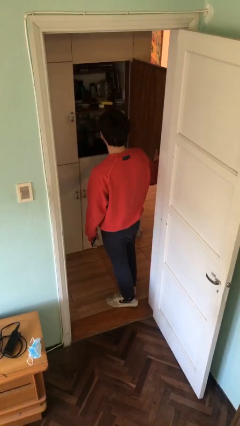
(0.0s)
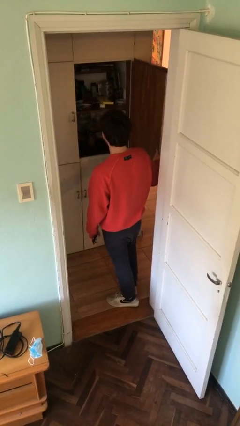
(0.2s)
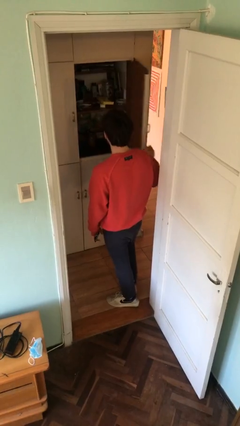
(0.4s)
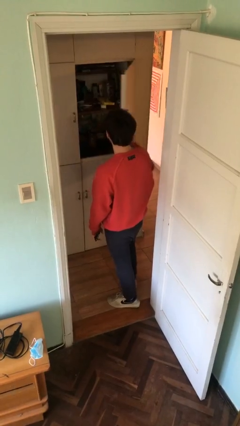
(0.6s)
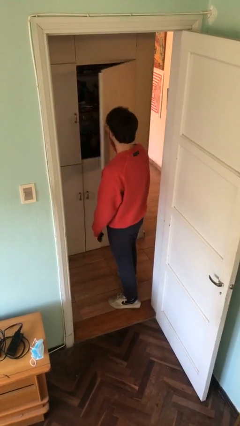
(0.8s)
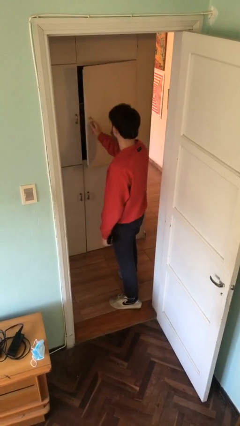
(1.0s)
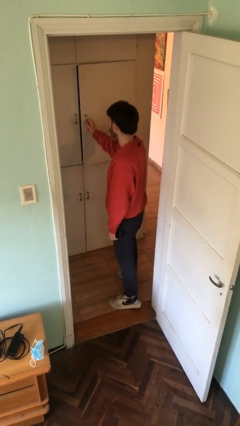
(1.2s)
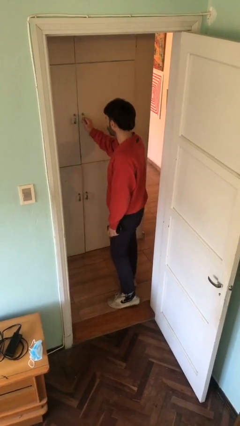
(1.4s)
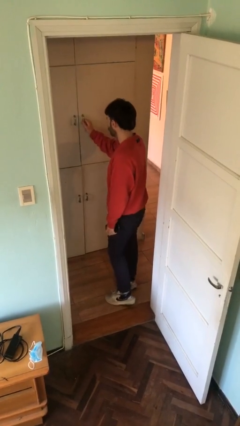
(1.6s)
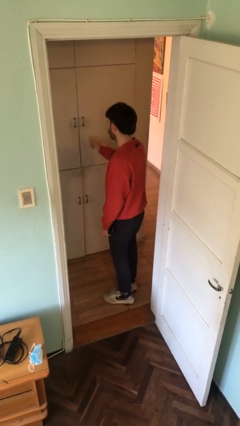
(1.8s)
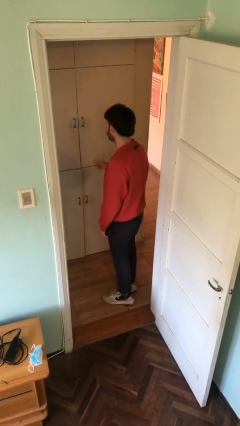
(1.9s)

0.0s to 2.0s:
person closes closet door

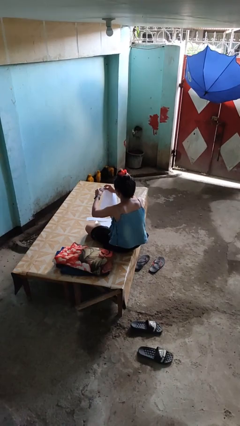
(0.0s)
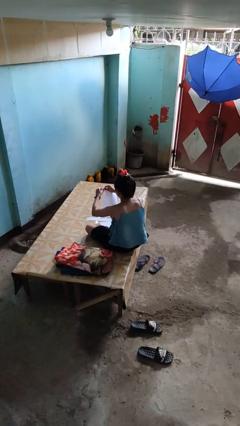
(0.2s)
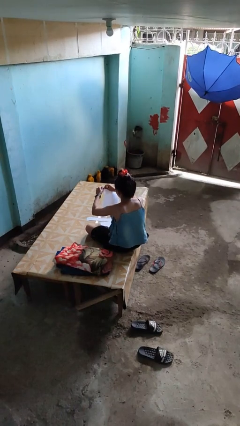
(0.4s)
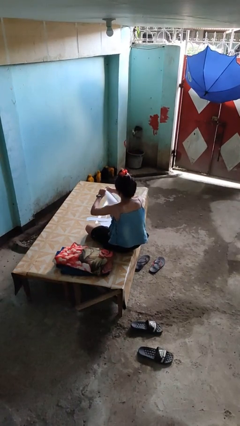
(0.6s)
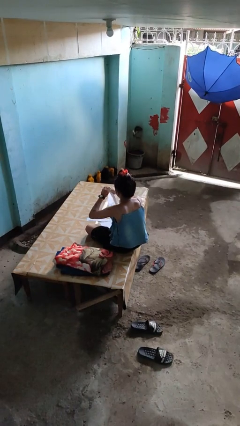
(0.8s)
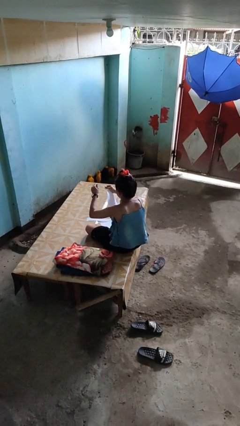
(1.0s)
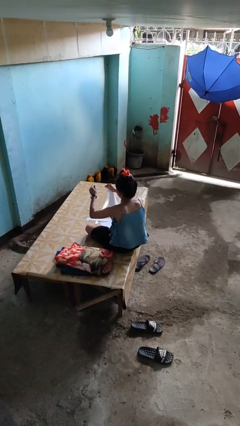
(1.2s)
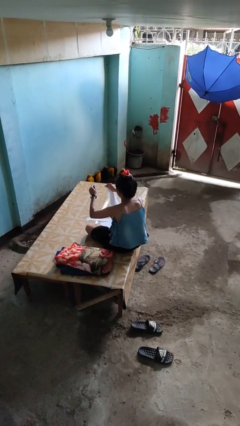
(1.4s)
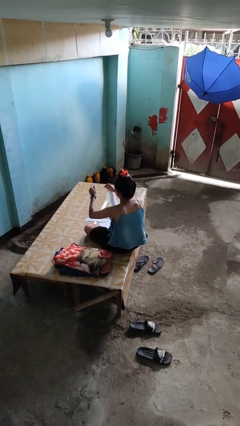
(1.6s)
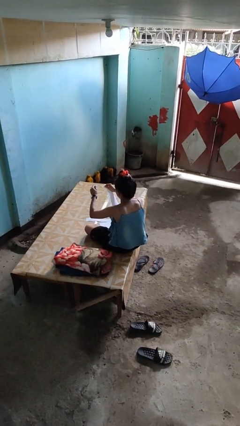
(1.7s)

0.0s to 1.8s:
person tears paper

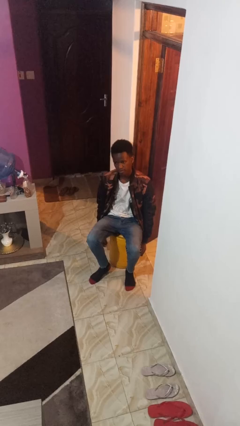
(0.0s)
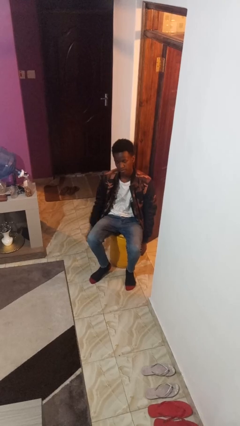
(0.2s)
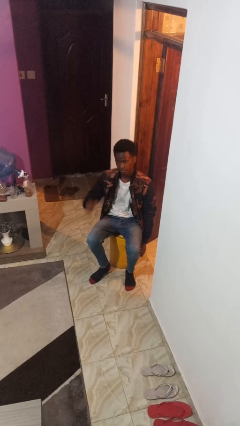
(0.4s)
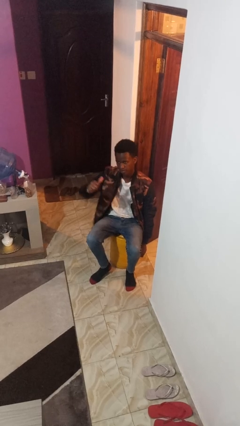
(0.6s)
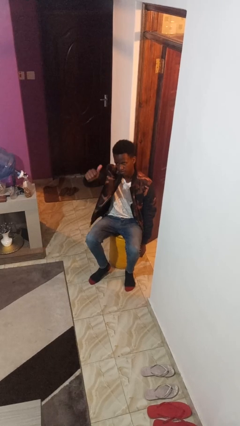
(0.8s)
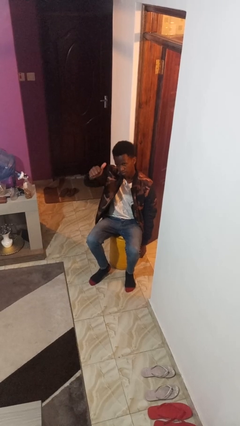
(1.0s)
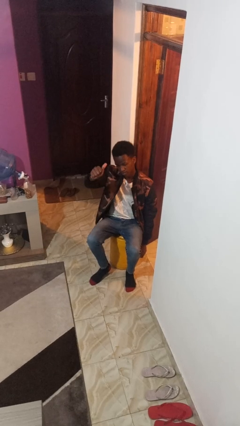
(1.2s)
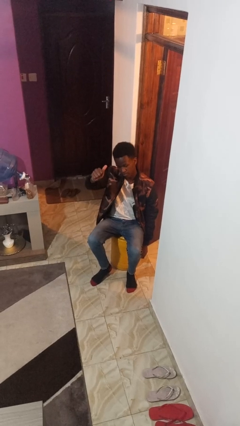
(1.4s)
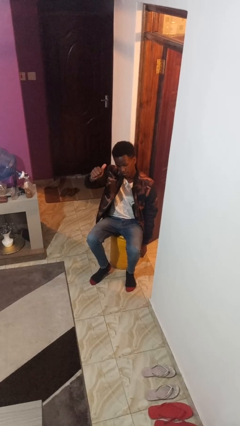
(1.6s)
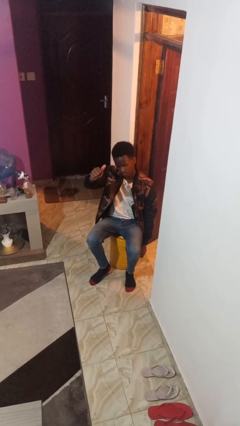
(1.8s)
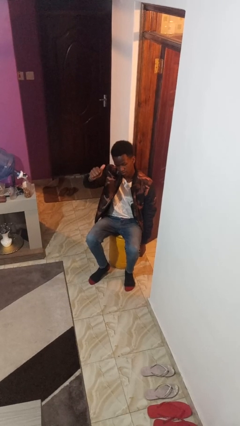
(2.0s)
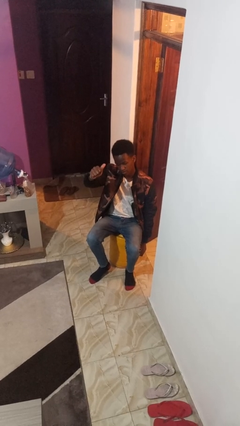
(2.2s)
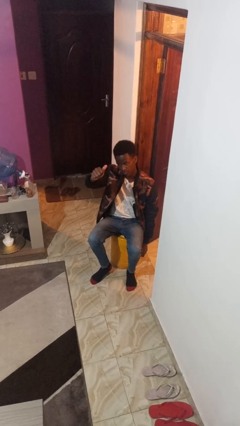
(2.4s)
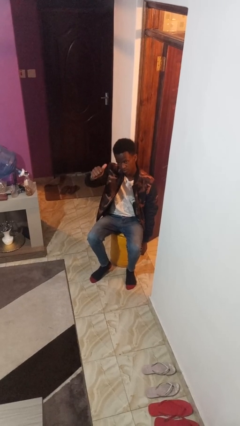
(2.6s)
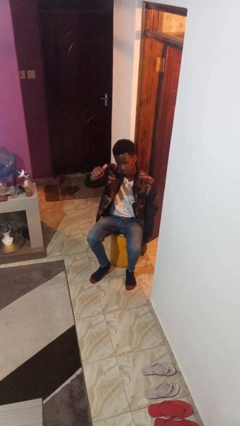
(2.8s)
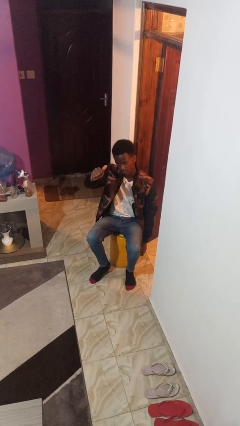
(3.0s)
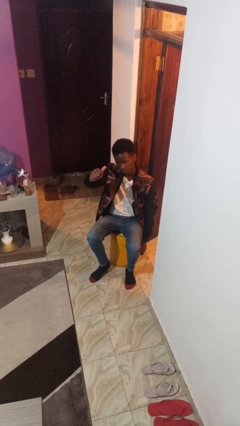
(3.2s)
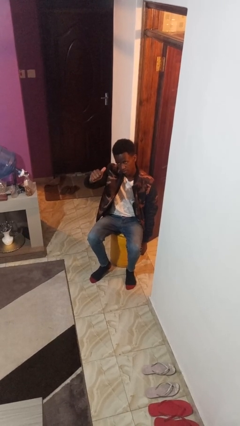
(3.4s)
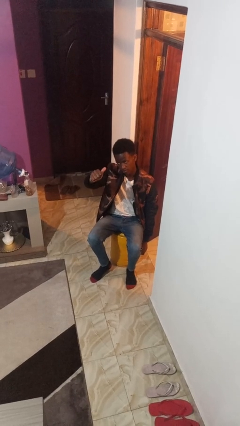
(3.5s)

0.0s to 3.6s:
person gestures thumbs up

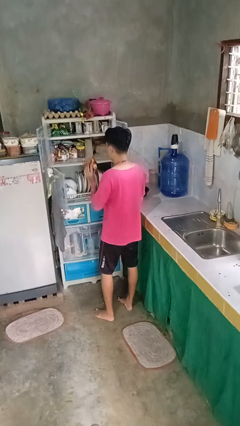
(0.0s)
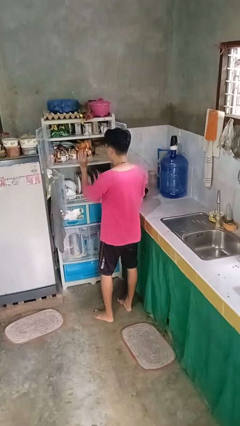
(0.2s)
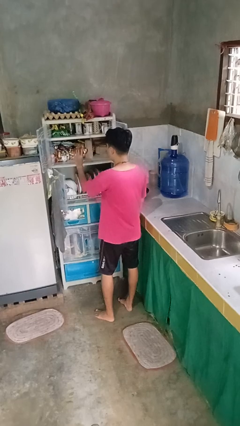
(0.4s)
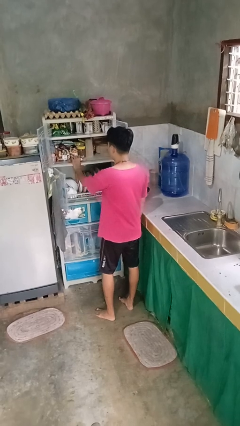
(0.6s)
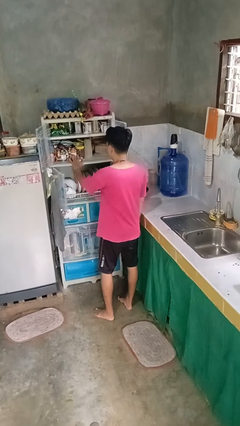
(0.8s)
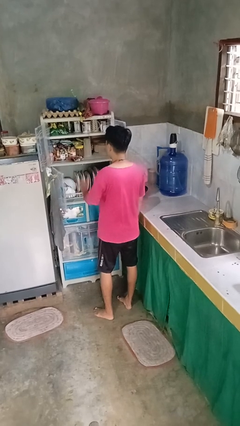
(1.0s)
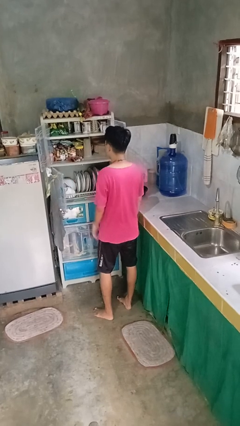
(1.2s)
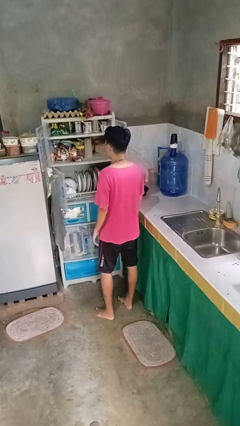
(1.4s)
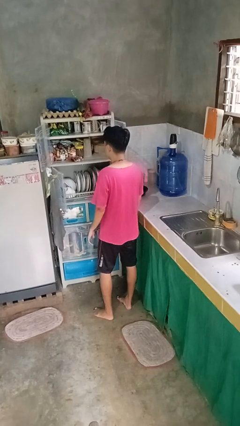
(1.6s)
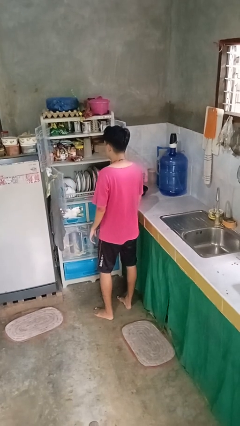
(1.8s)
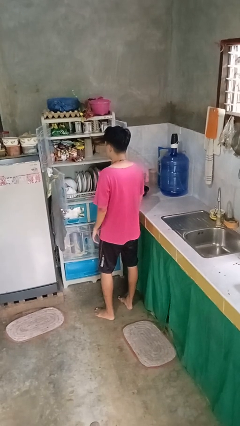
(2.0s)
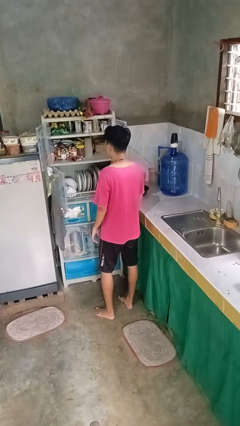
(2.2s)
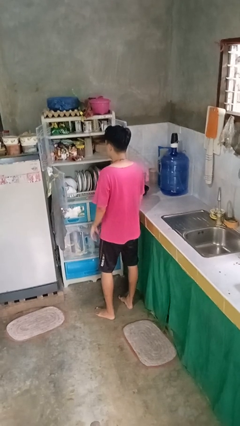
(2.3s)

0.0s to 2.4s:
person puts object in cabinet

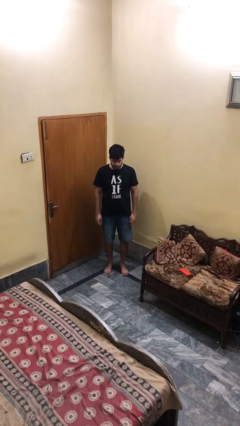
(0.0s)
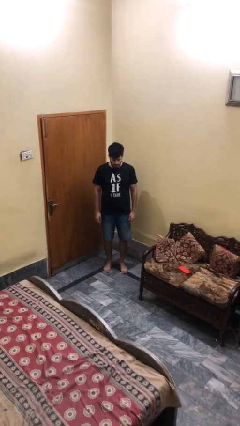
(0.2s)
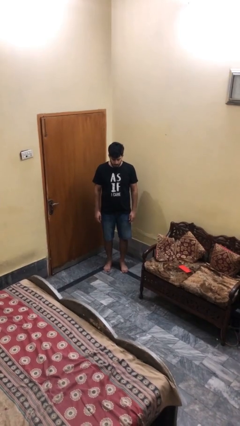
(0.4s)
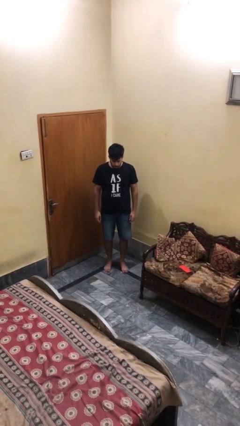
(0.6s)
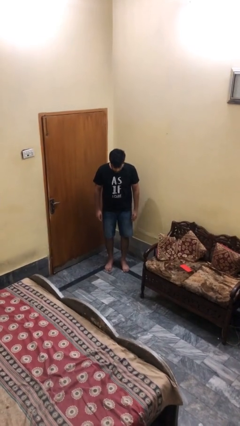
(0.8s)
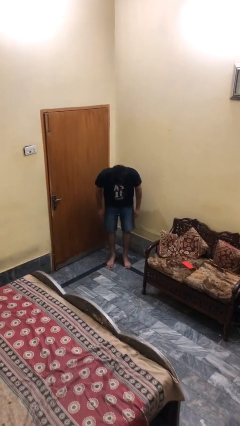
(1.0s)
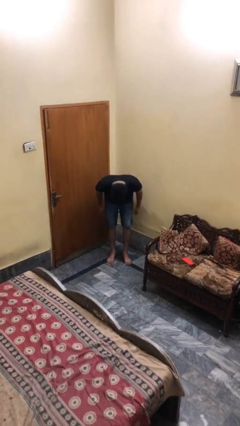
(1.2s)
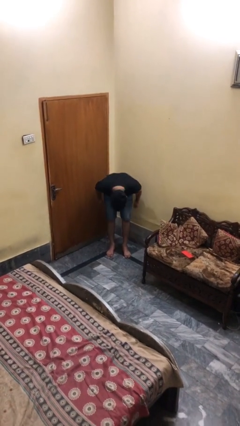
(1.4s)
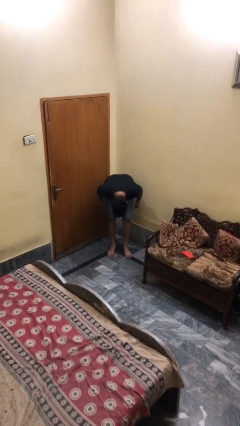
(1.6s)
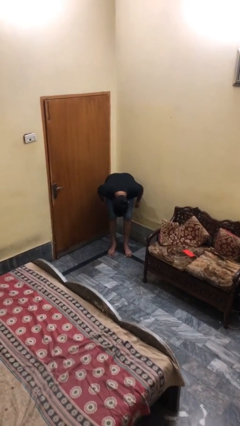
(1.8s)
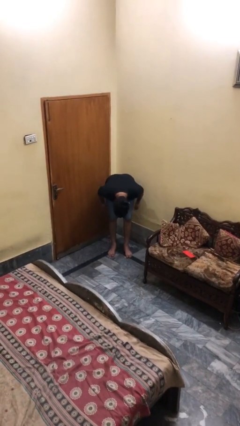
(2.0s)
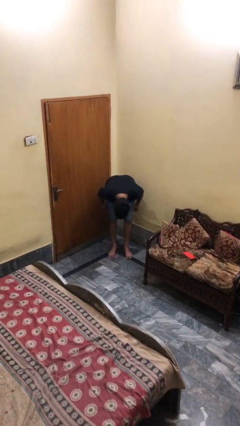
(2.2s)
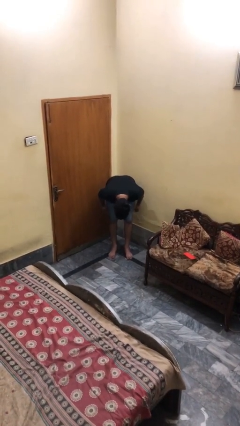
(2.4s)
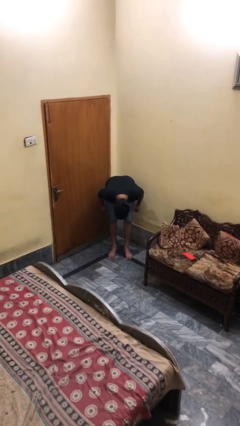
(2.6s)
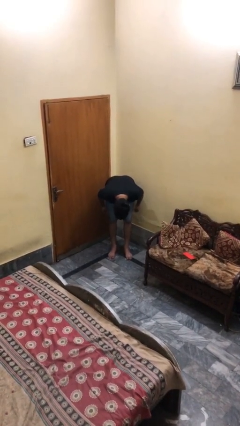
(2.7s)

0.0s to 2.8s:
person bows

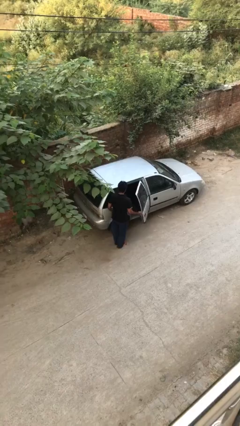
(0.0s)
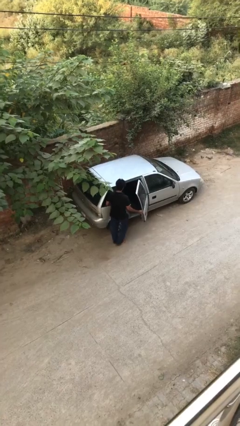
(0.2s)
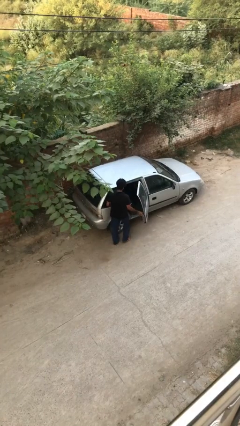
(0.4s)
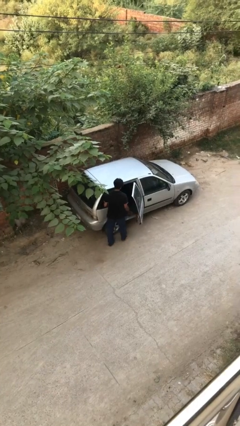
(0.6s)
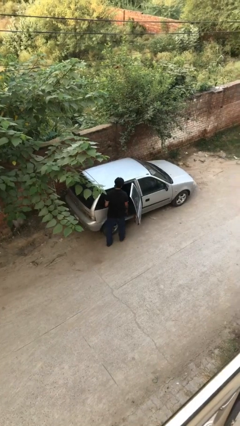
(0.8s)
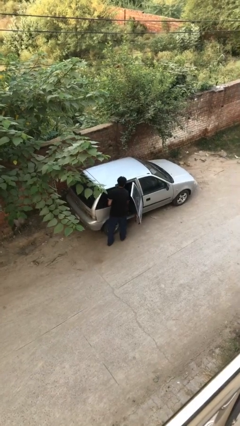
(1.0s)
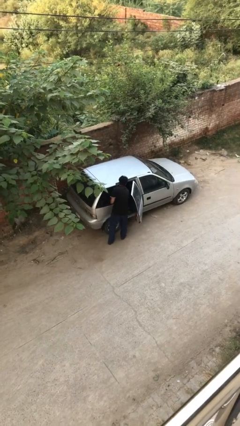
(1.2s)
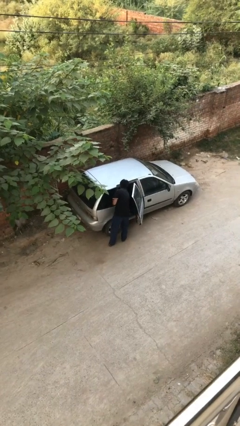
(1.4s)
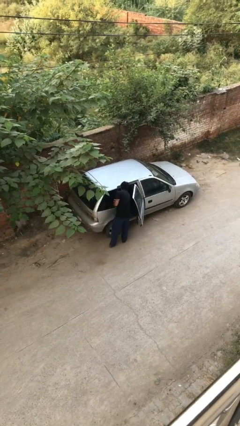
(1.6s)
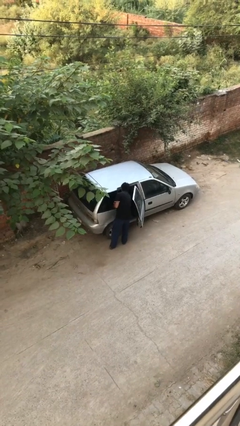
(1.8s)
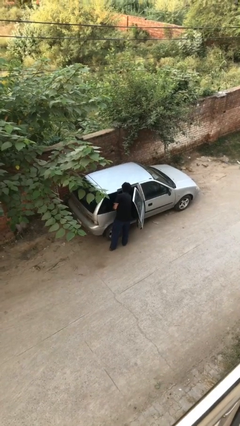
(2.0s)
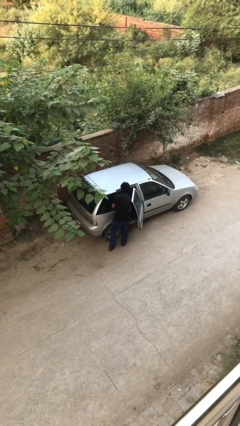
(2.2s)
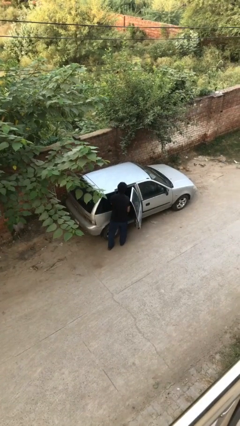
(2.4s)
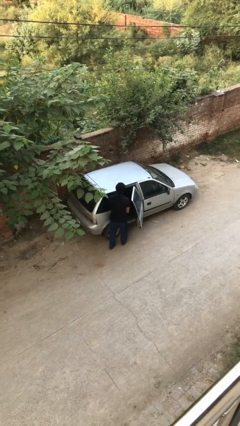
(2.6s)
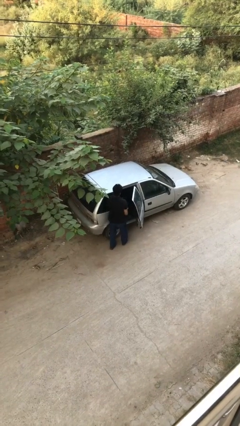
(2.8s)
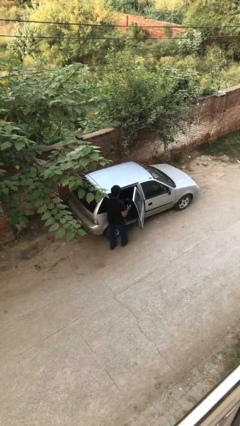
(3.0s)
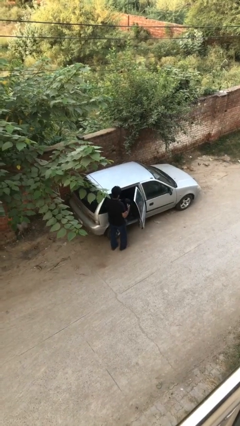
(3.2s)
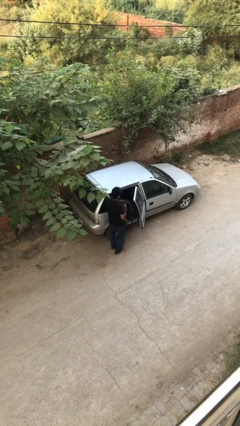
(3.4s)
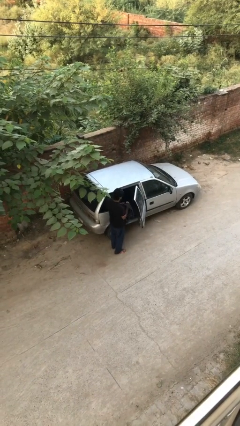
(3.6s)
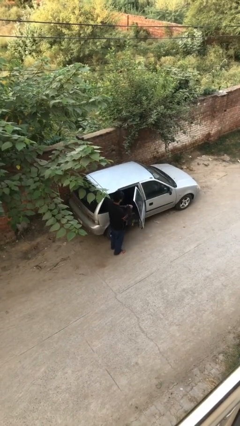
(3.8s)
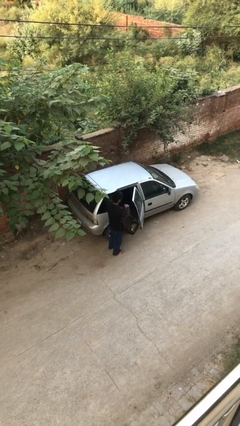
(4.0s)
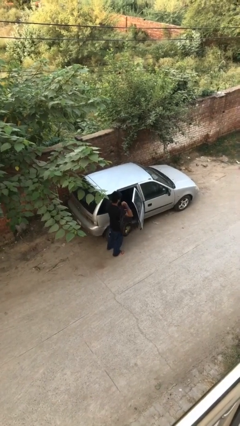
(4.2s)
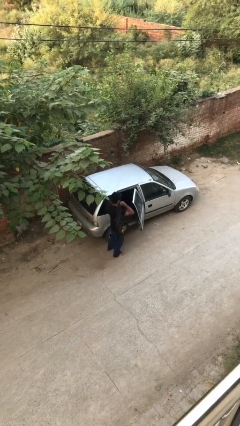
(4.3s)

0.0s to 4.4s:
person unloads car

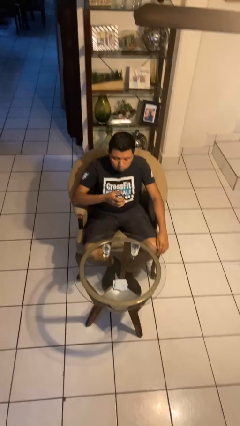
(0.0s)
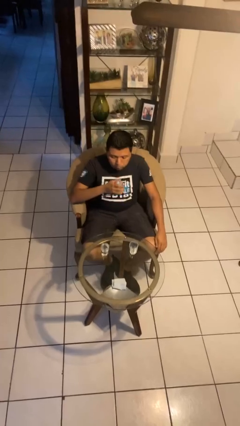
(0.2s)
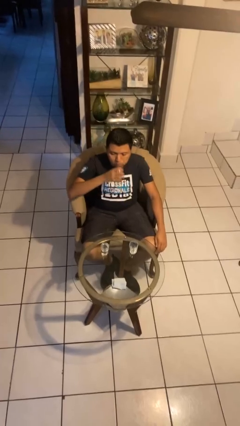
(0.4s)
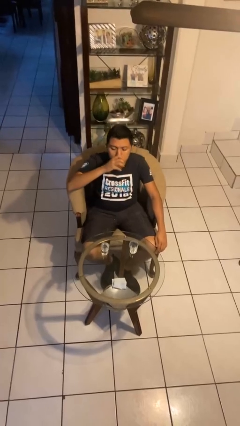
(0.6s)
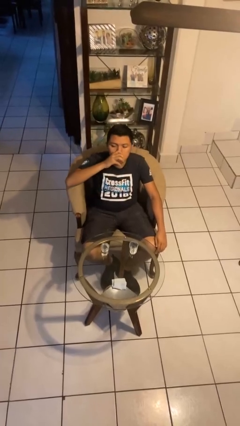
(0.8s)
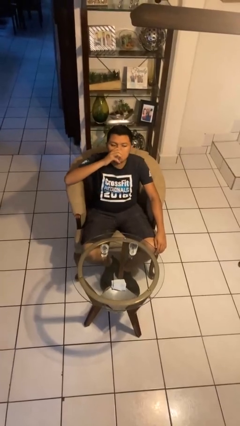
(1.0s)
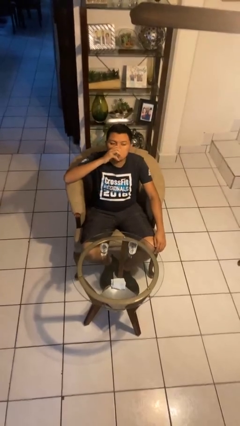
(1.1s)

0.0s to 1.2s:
person drinks from shotglass
